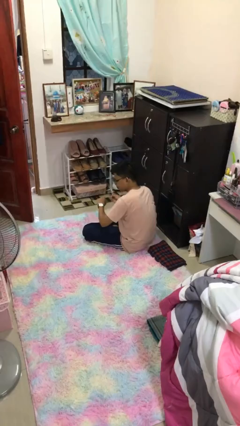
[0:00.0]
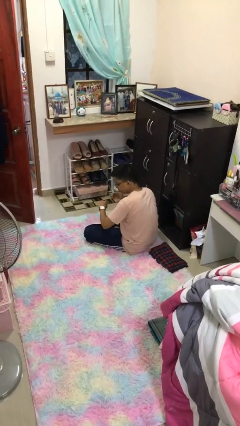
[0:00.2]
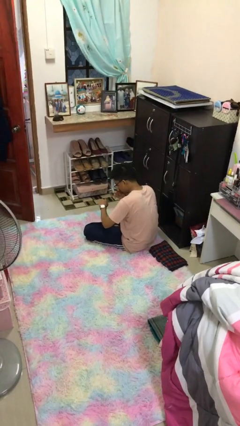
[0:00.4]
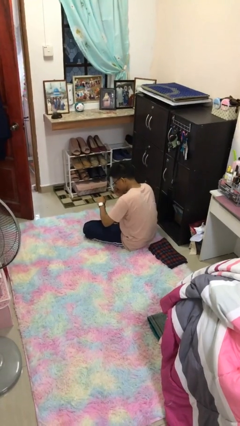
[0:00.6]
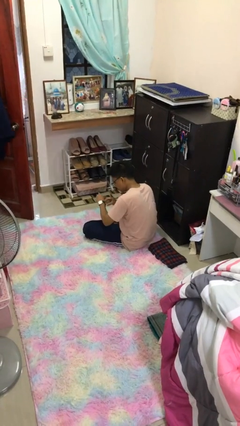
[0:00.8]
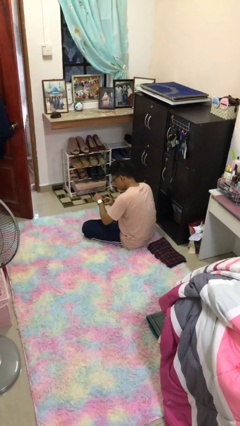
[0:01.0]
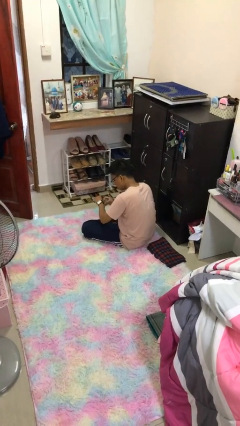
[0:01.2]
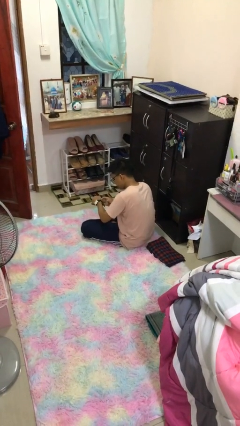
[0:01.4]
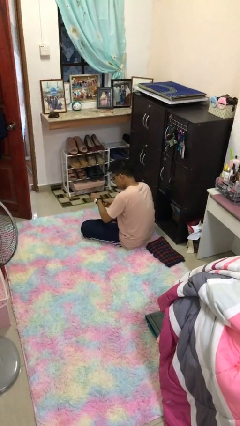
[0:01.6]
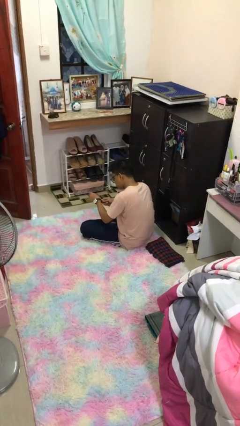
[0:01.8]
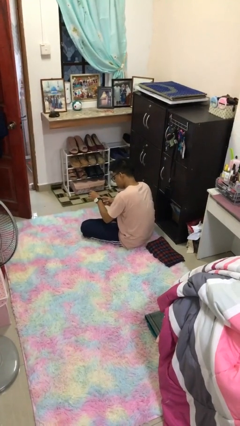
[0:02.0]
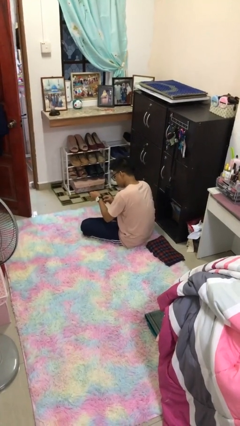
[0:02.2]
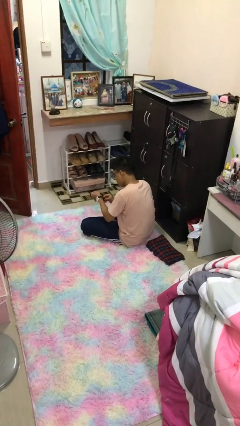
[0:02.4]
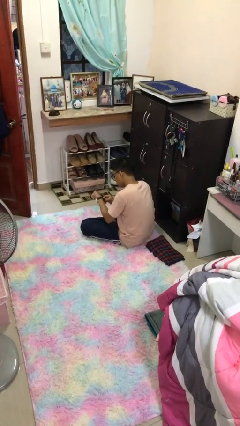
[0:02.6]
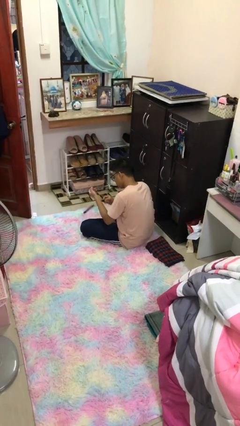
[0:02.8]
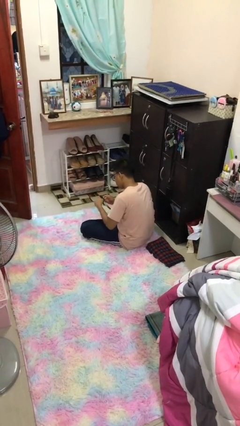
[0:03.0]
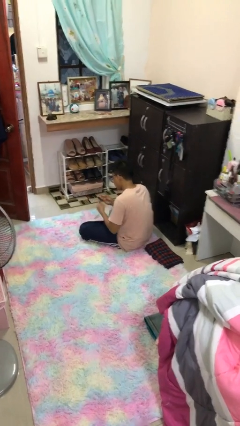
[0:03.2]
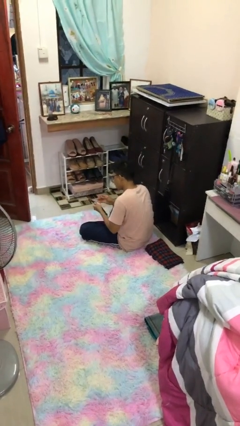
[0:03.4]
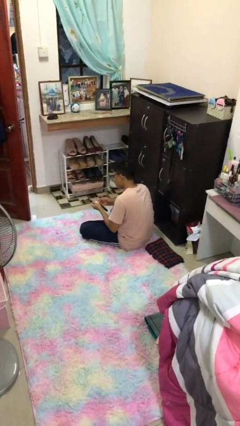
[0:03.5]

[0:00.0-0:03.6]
person takes off wristwatch

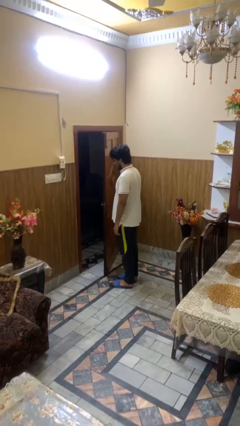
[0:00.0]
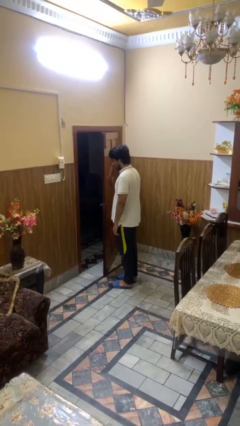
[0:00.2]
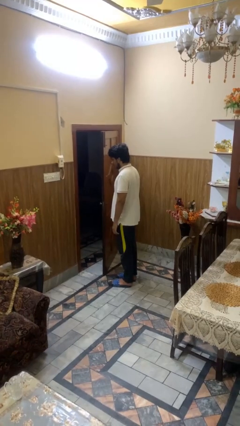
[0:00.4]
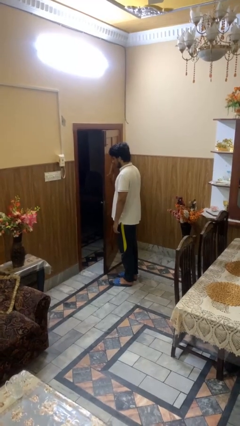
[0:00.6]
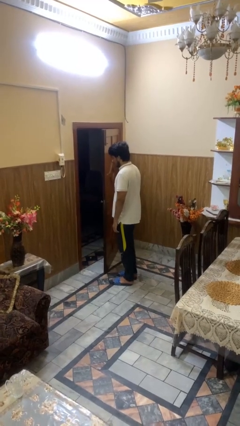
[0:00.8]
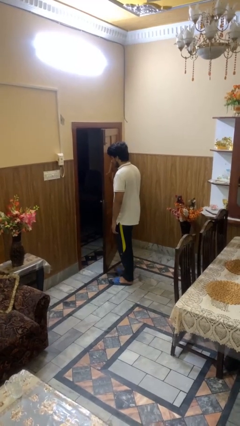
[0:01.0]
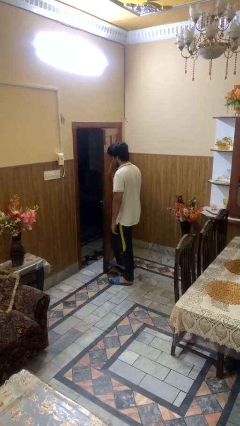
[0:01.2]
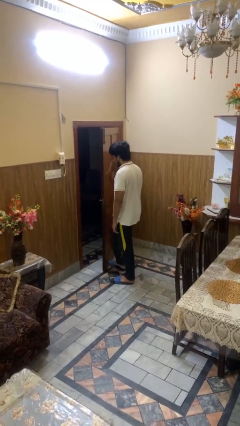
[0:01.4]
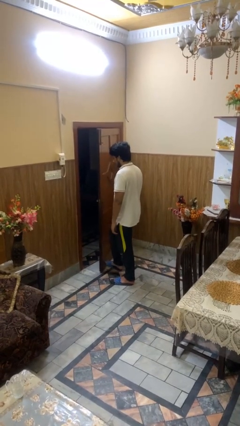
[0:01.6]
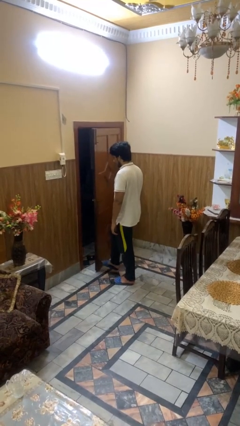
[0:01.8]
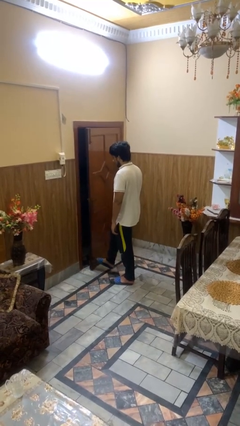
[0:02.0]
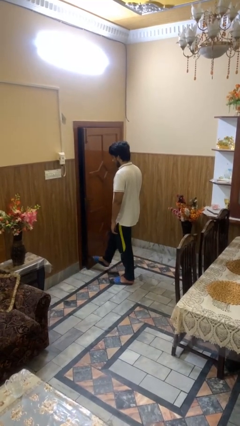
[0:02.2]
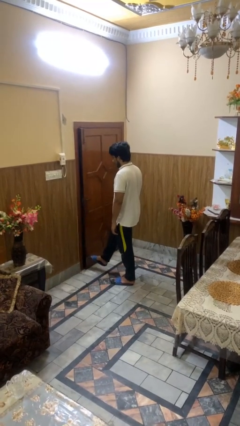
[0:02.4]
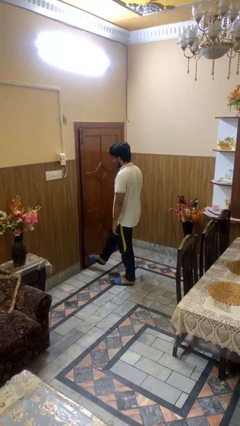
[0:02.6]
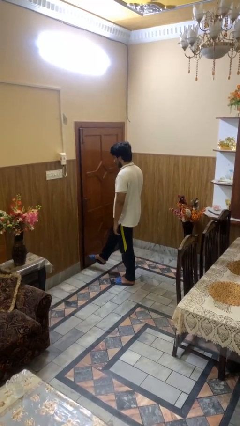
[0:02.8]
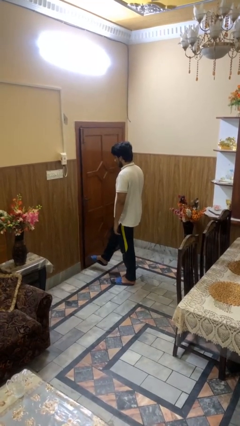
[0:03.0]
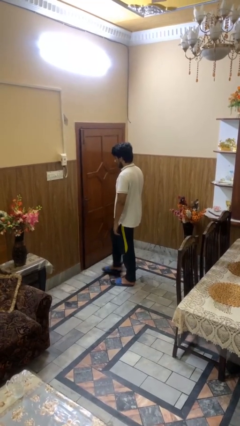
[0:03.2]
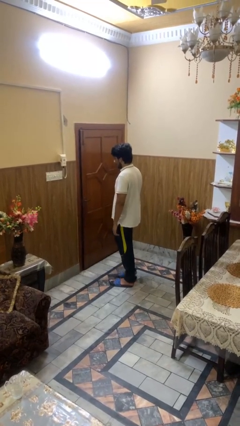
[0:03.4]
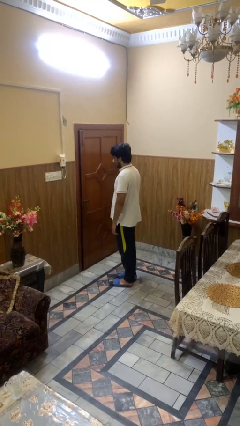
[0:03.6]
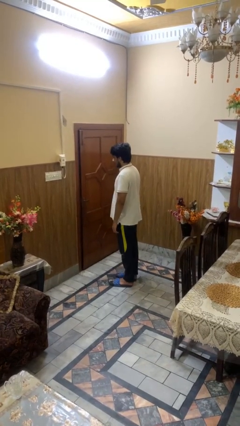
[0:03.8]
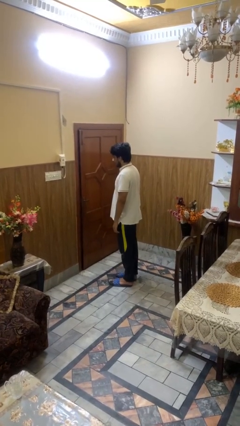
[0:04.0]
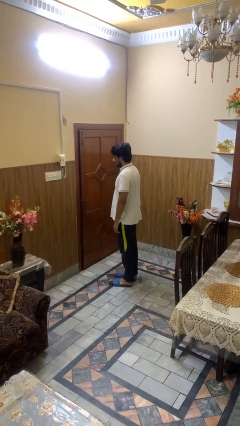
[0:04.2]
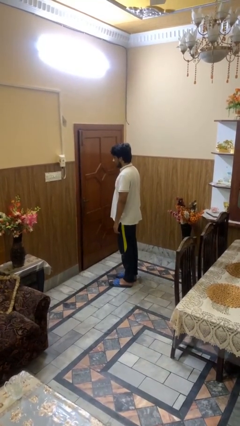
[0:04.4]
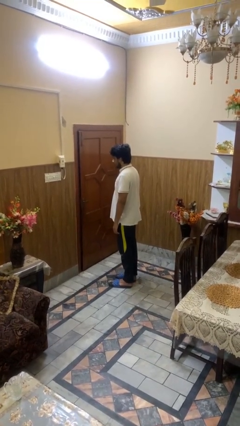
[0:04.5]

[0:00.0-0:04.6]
person closes door with foot

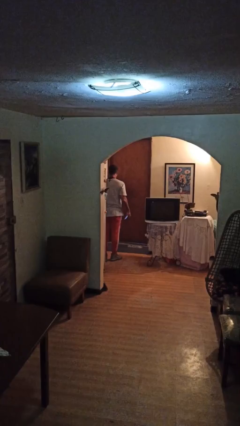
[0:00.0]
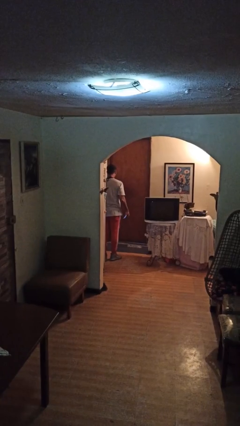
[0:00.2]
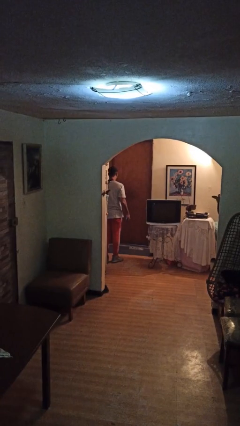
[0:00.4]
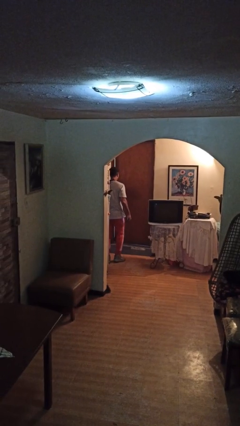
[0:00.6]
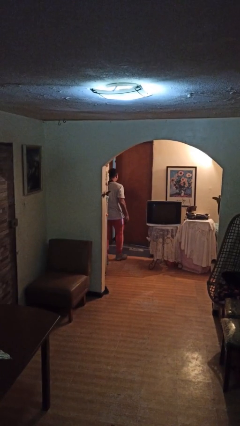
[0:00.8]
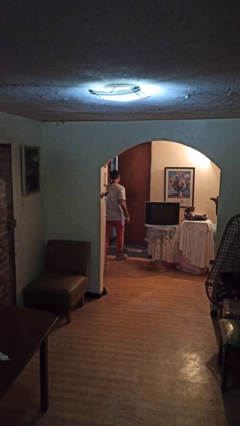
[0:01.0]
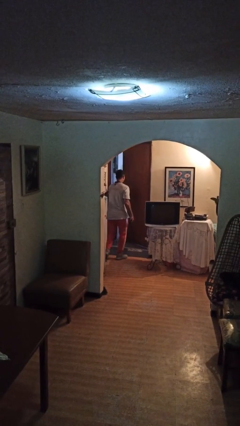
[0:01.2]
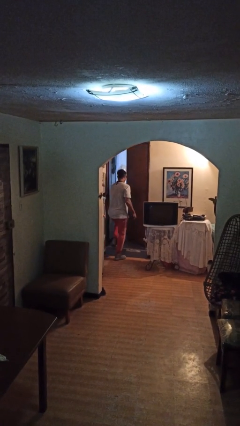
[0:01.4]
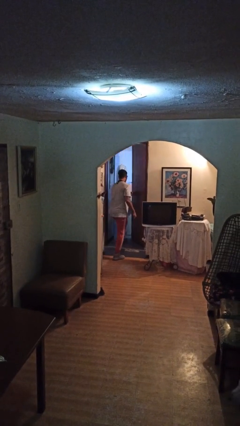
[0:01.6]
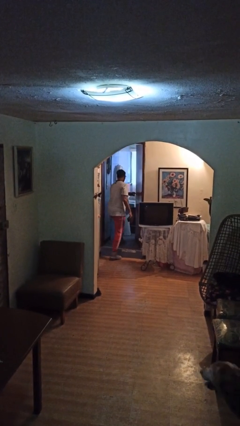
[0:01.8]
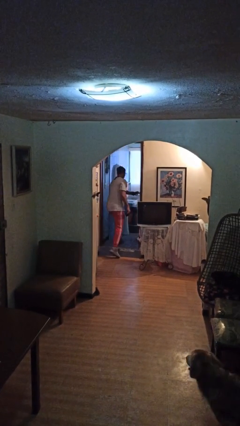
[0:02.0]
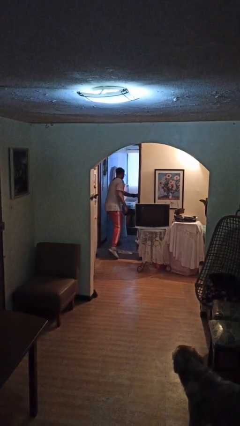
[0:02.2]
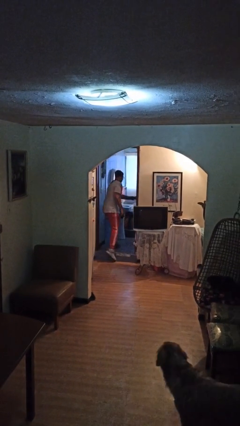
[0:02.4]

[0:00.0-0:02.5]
person opens facility door

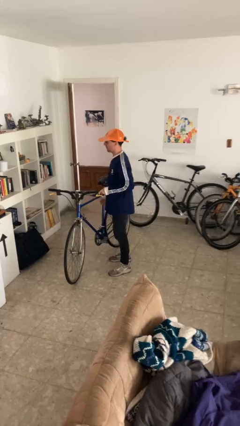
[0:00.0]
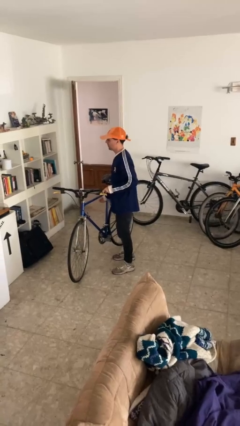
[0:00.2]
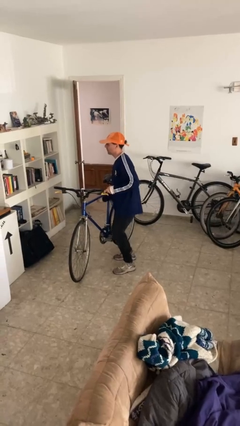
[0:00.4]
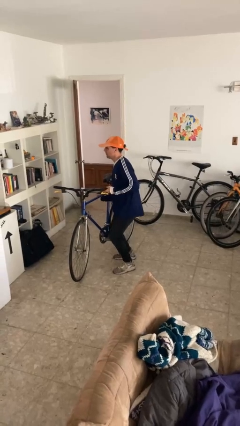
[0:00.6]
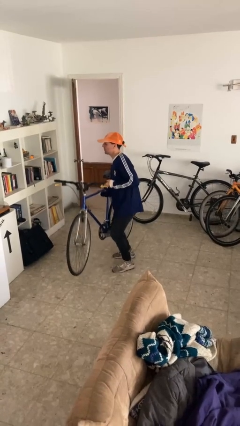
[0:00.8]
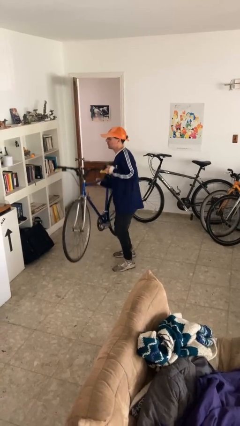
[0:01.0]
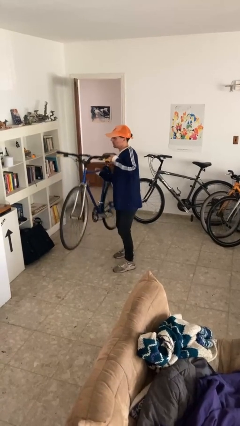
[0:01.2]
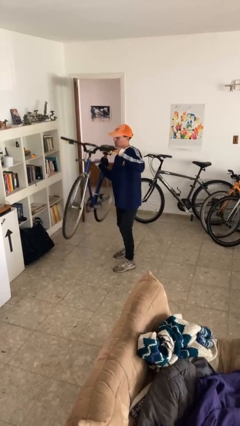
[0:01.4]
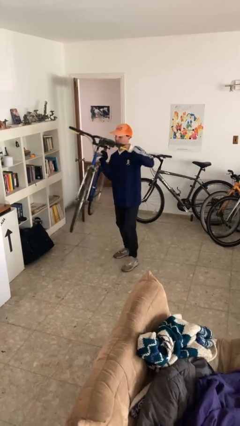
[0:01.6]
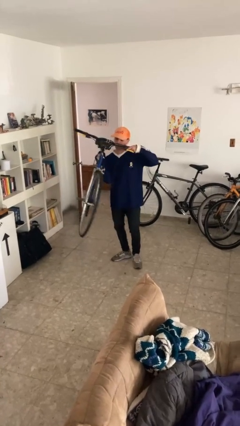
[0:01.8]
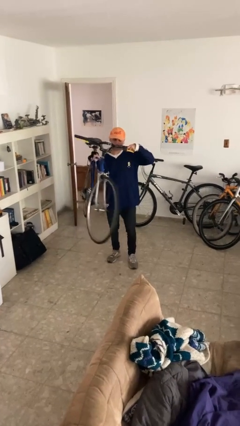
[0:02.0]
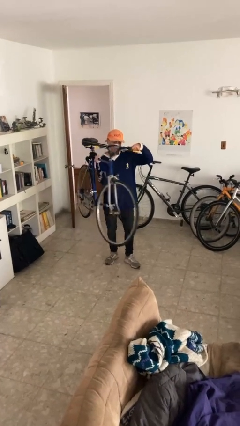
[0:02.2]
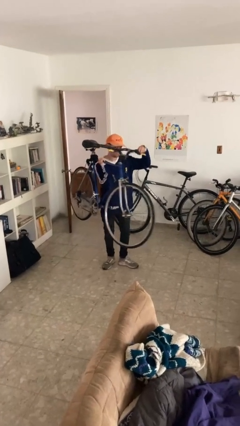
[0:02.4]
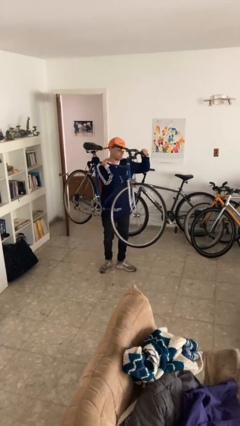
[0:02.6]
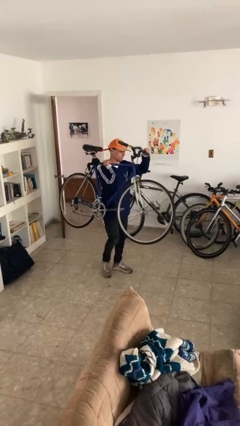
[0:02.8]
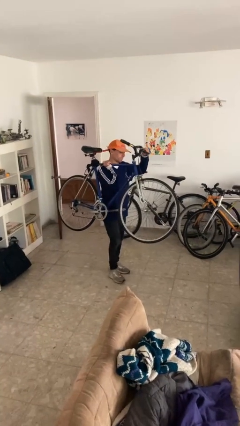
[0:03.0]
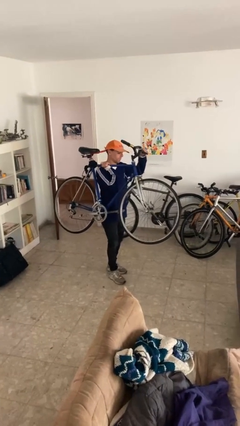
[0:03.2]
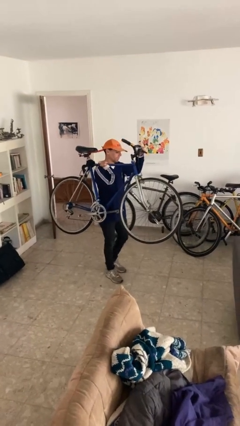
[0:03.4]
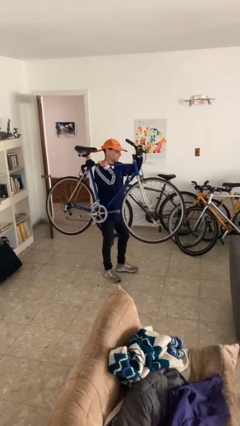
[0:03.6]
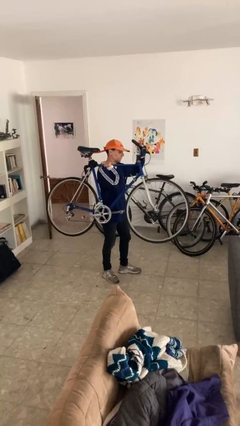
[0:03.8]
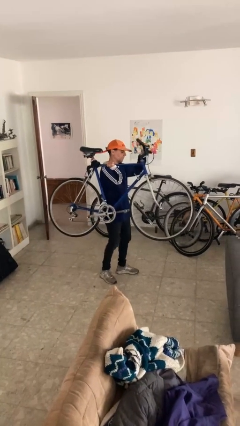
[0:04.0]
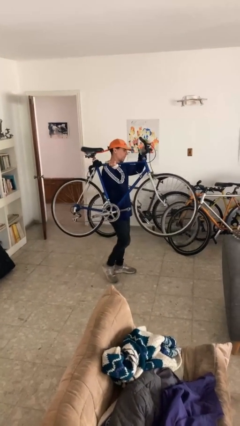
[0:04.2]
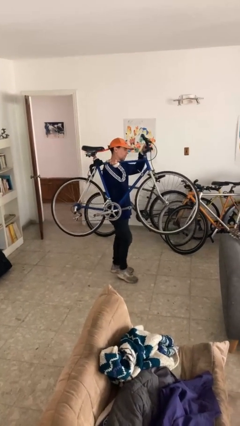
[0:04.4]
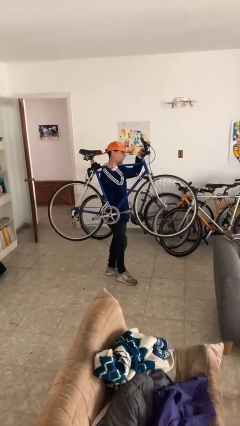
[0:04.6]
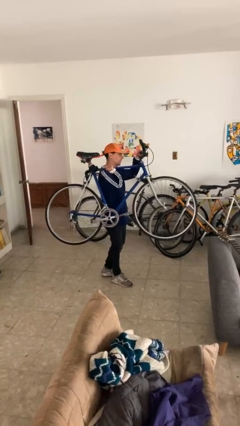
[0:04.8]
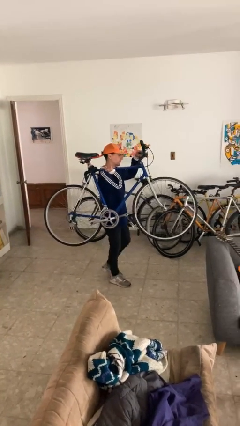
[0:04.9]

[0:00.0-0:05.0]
person carries bicycle

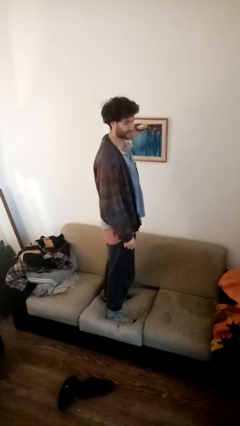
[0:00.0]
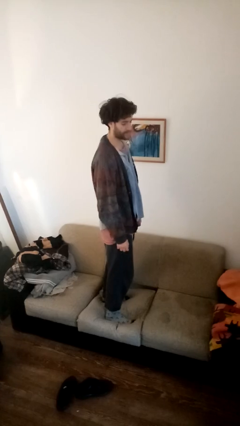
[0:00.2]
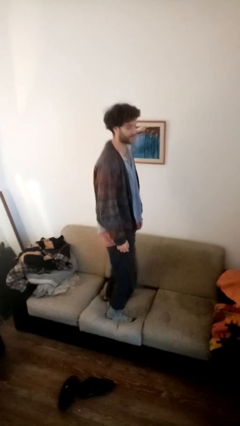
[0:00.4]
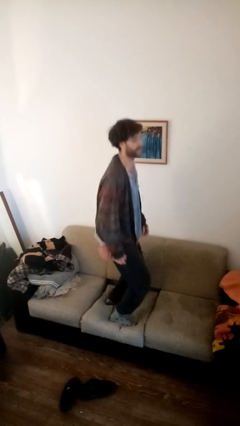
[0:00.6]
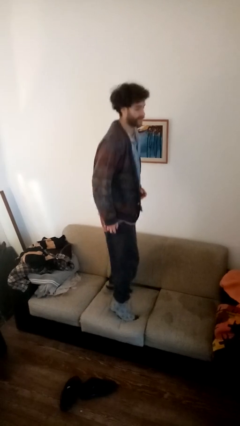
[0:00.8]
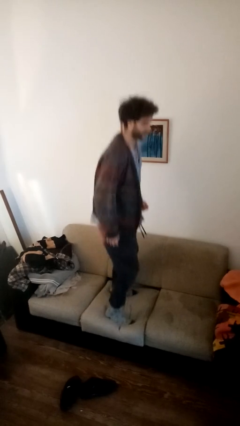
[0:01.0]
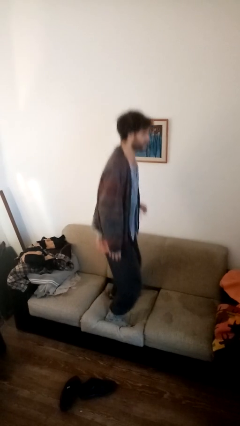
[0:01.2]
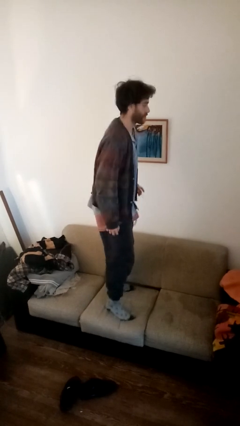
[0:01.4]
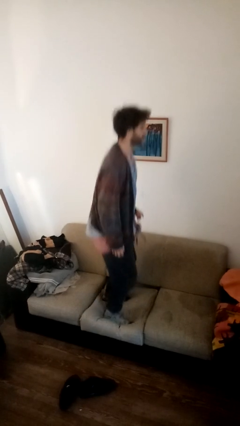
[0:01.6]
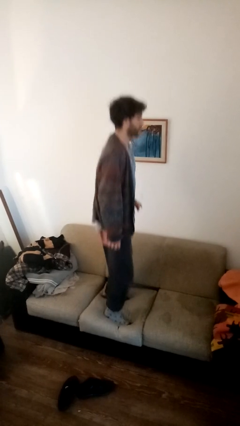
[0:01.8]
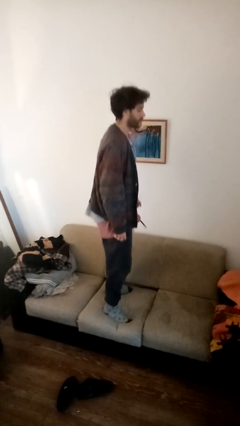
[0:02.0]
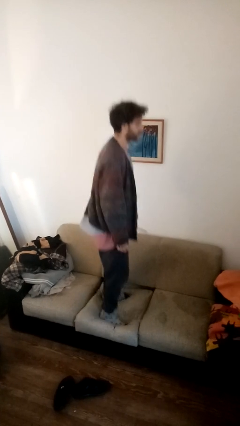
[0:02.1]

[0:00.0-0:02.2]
person jumps on couch

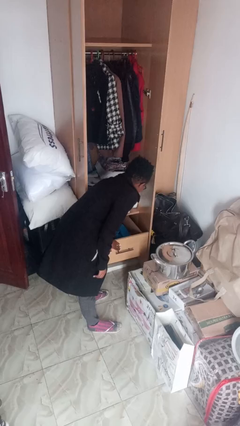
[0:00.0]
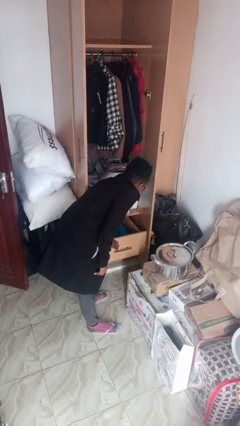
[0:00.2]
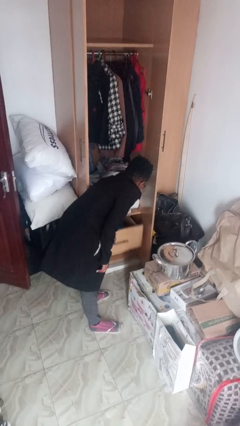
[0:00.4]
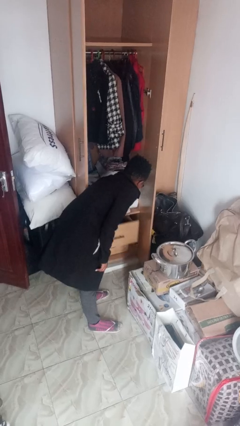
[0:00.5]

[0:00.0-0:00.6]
person closes dresser drawer
